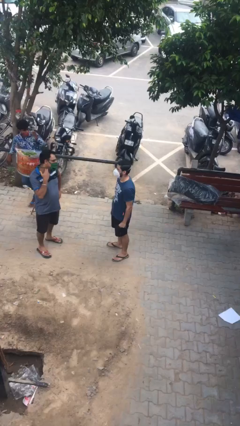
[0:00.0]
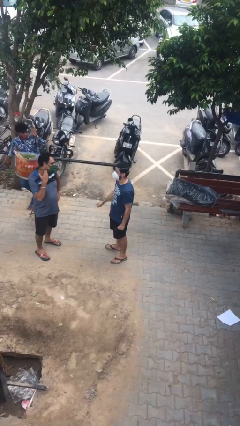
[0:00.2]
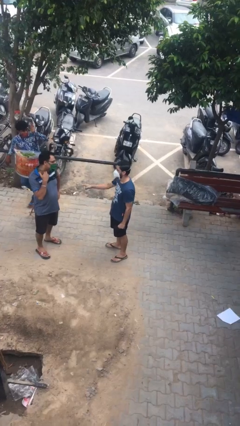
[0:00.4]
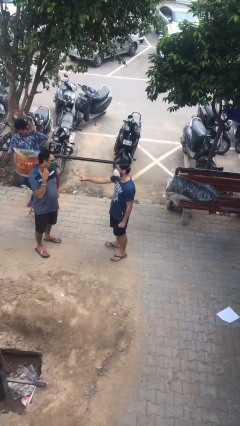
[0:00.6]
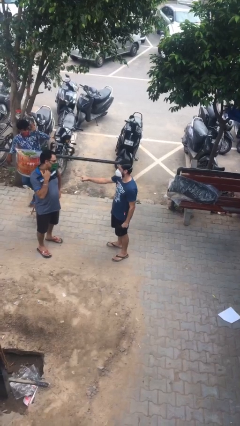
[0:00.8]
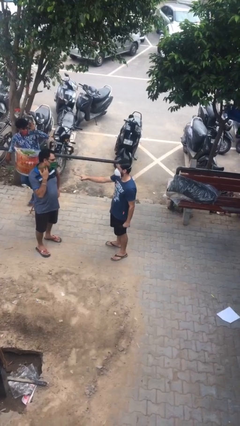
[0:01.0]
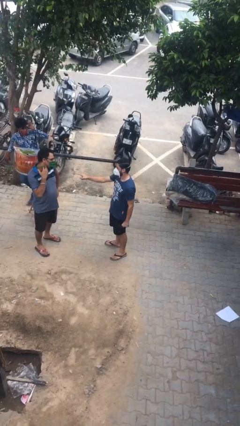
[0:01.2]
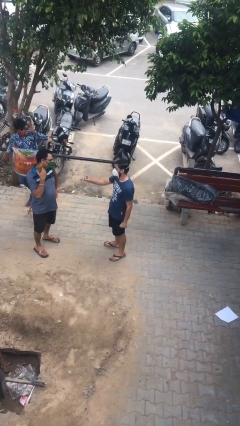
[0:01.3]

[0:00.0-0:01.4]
person points at person

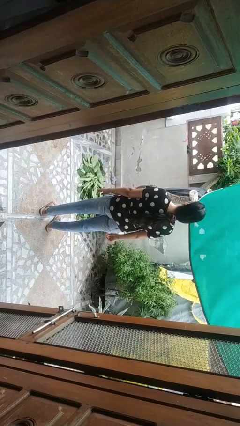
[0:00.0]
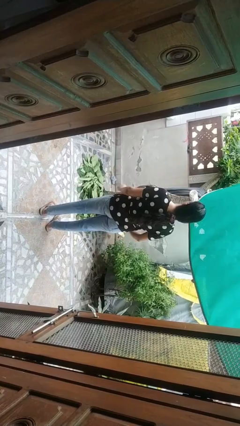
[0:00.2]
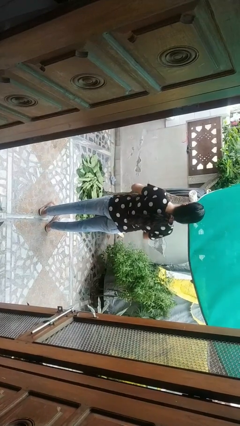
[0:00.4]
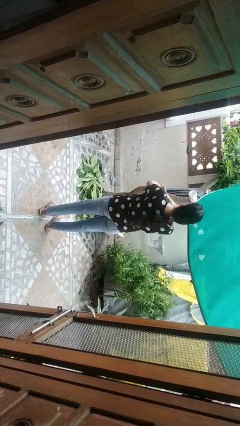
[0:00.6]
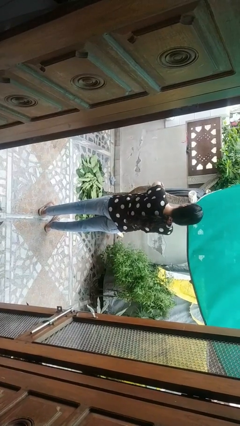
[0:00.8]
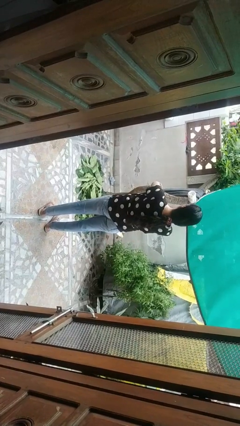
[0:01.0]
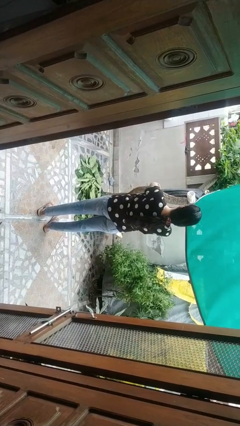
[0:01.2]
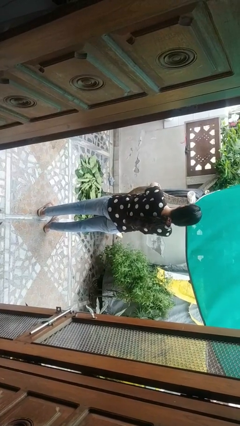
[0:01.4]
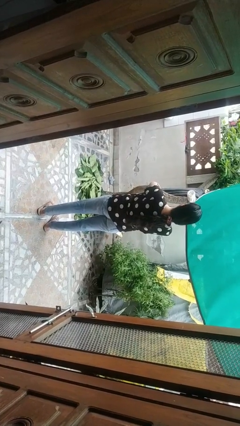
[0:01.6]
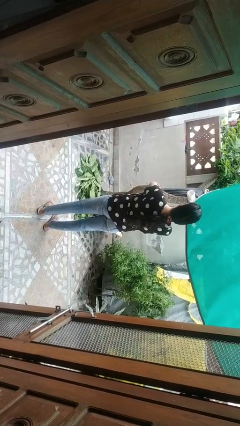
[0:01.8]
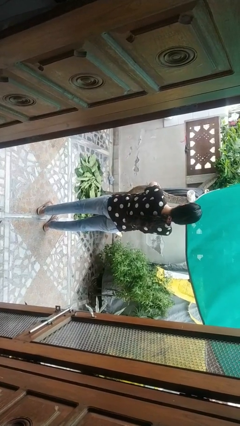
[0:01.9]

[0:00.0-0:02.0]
person crosses arms

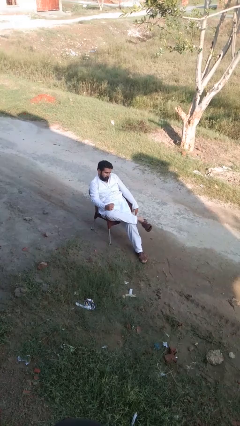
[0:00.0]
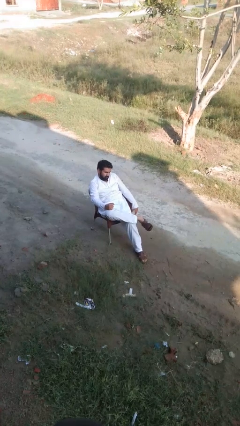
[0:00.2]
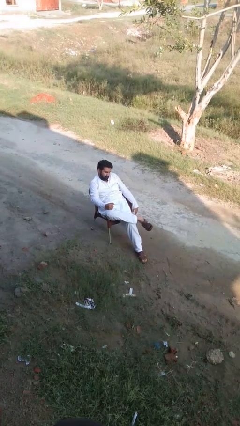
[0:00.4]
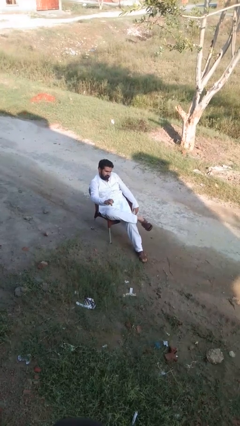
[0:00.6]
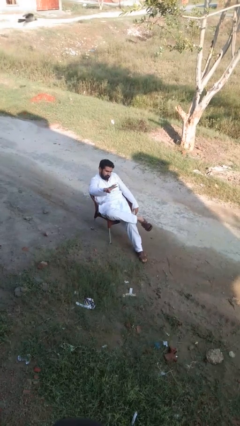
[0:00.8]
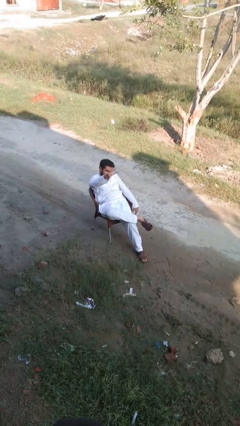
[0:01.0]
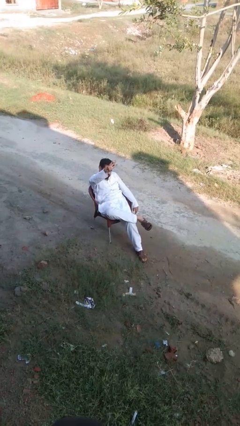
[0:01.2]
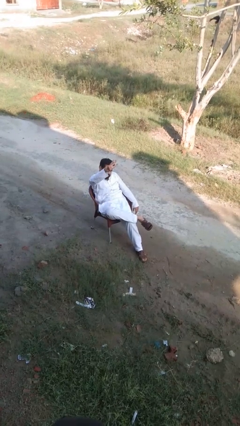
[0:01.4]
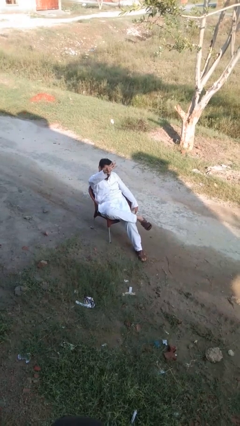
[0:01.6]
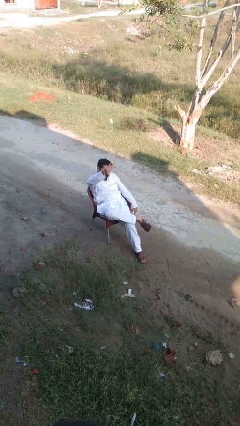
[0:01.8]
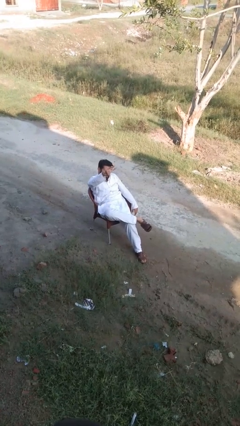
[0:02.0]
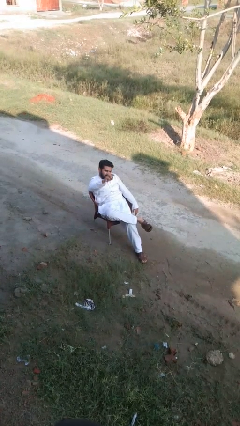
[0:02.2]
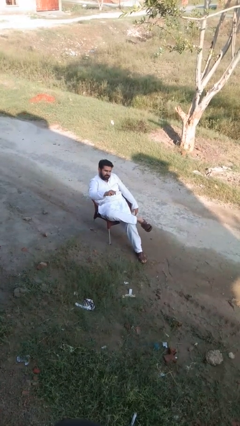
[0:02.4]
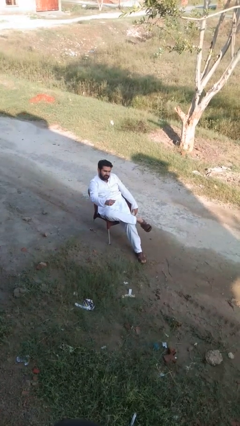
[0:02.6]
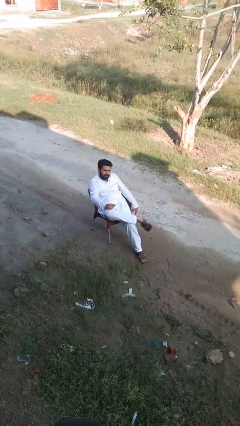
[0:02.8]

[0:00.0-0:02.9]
person gestures number three

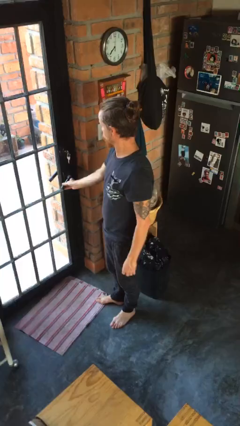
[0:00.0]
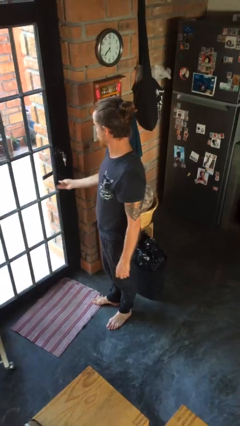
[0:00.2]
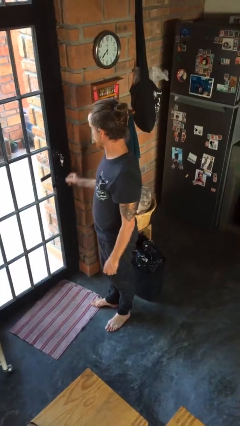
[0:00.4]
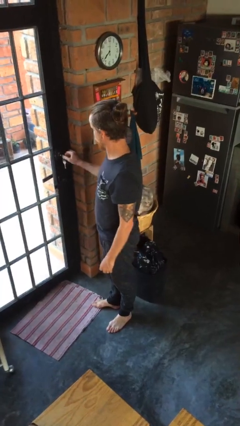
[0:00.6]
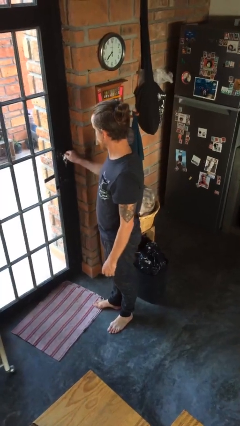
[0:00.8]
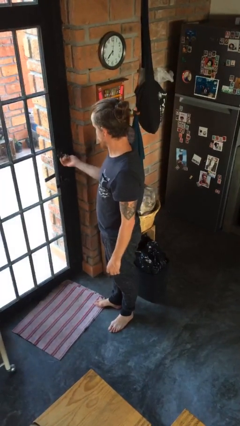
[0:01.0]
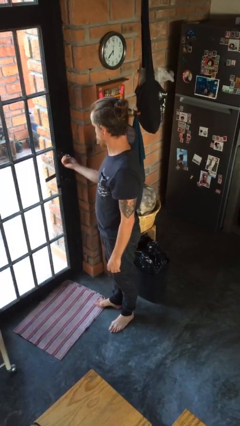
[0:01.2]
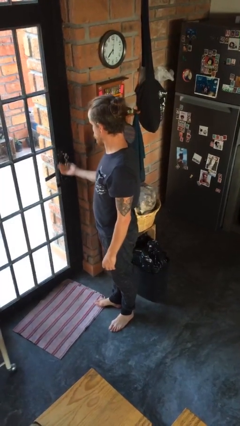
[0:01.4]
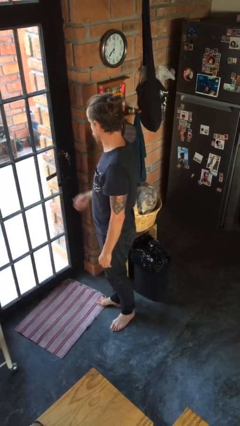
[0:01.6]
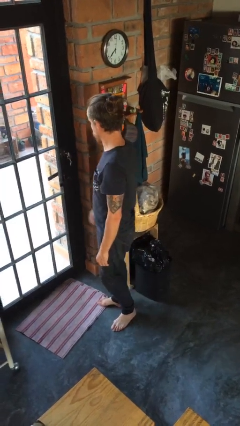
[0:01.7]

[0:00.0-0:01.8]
person locks door with keys

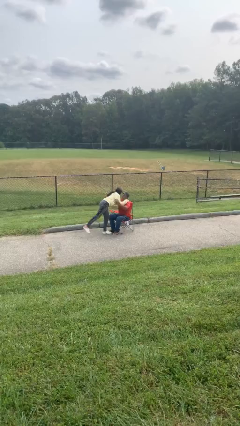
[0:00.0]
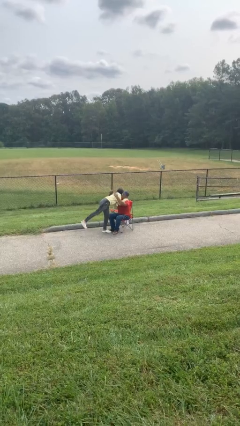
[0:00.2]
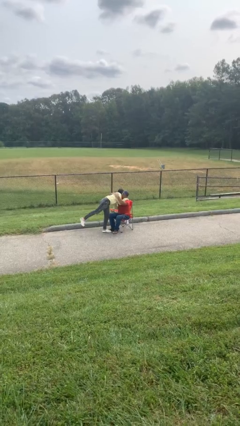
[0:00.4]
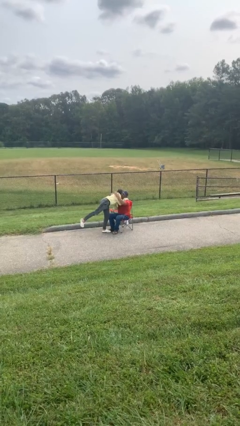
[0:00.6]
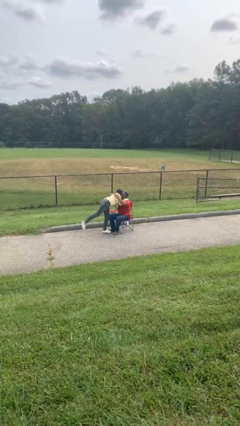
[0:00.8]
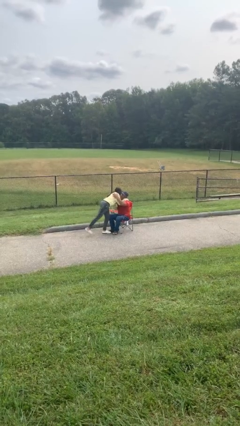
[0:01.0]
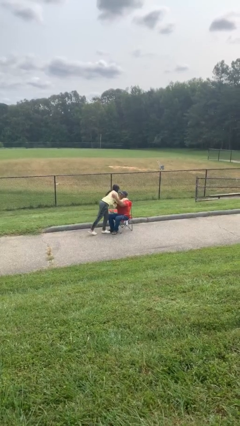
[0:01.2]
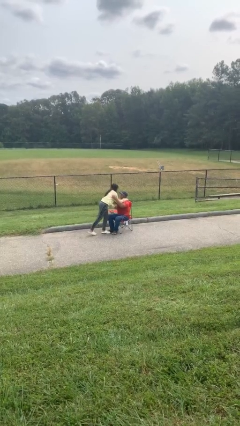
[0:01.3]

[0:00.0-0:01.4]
person embraces person

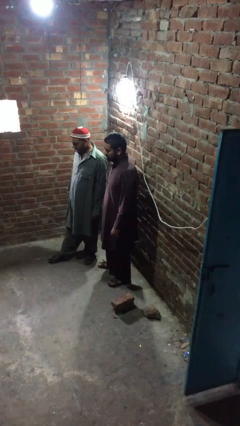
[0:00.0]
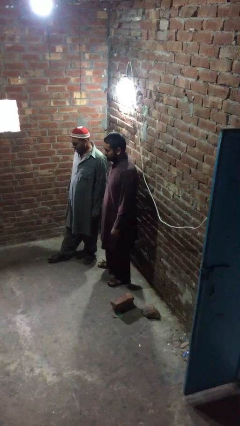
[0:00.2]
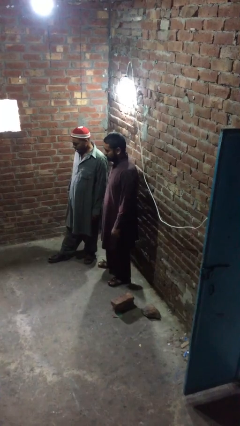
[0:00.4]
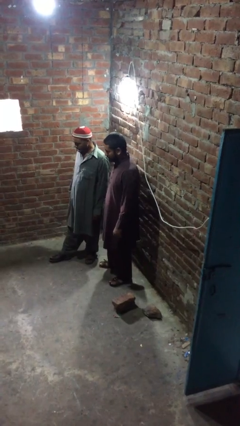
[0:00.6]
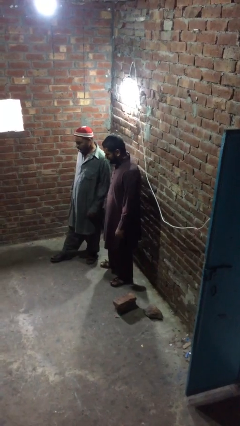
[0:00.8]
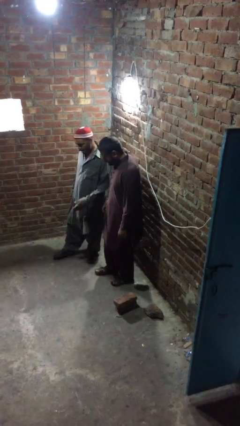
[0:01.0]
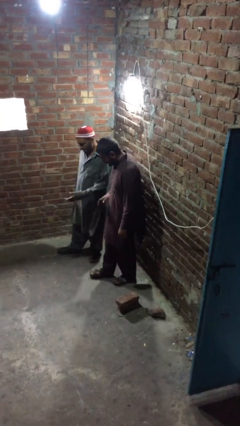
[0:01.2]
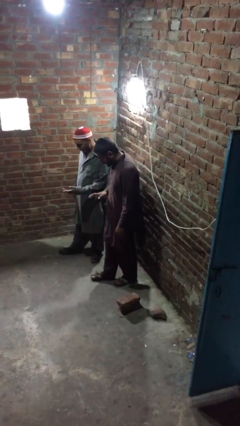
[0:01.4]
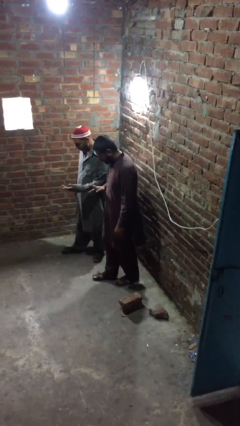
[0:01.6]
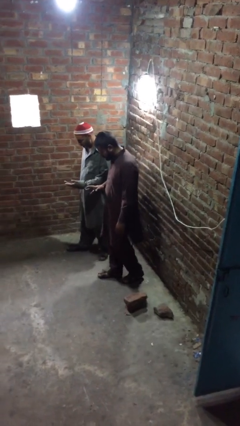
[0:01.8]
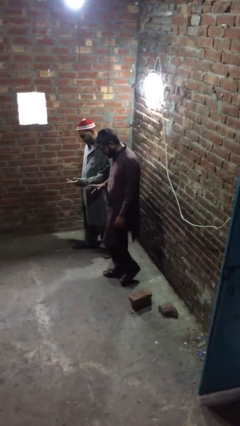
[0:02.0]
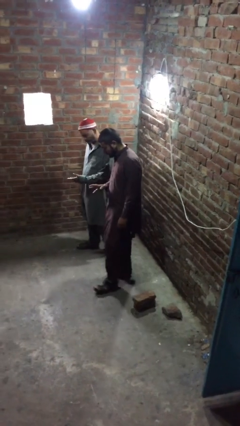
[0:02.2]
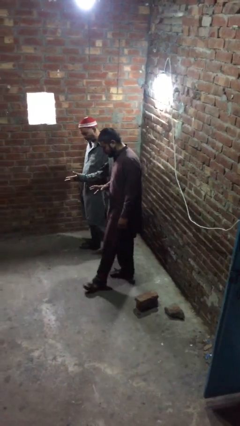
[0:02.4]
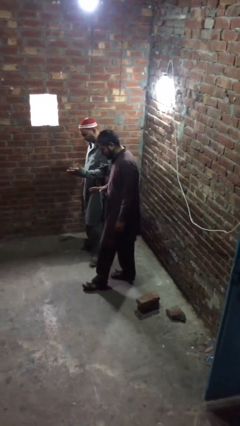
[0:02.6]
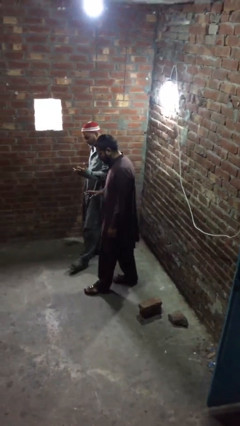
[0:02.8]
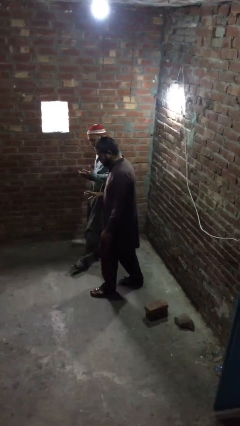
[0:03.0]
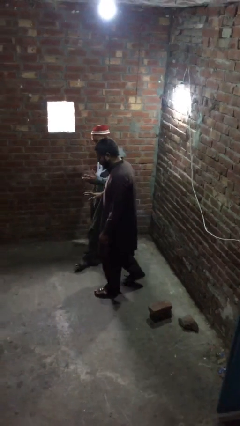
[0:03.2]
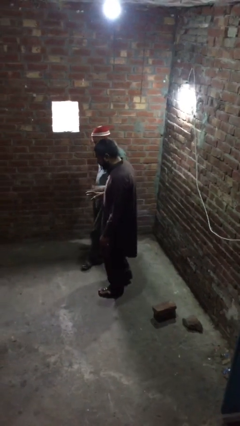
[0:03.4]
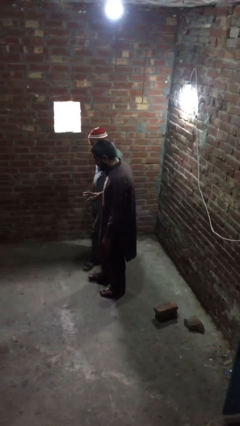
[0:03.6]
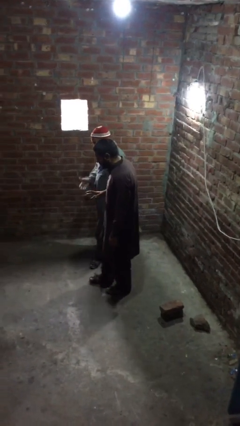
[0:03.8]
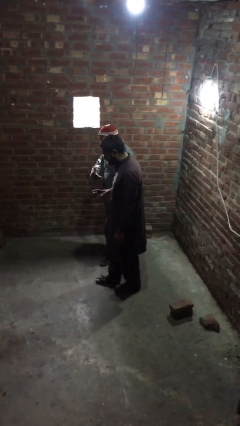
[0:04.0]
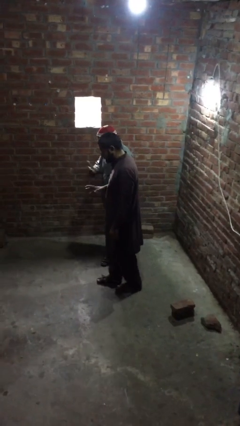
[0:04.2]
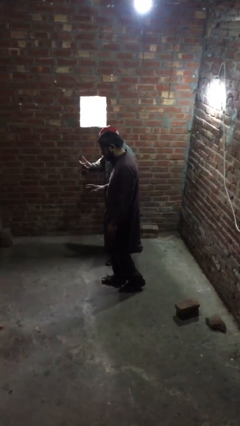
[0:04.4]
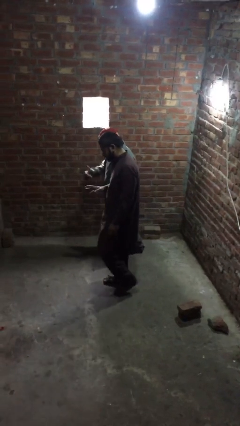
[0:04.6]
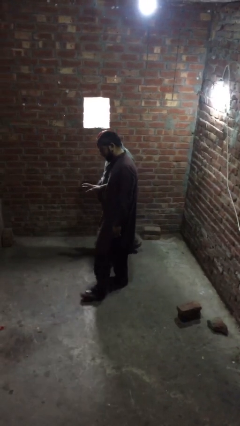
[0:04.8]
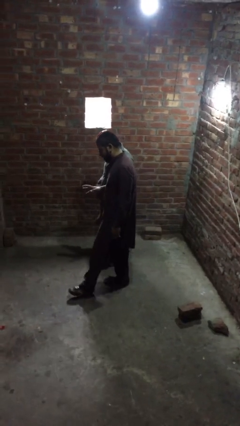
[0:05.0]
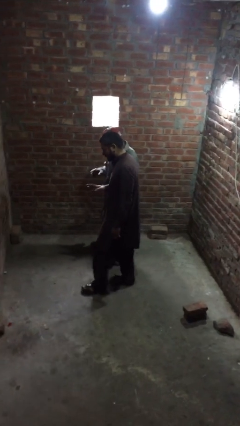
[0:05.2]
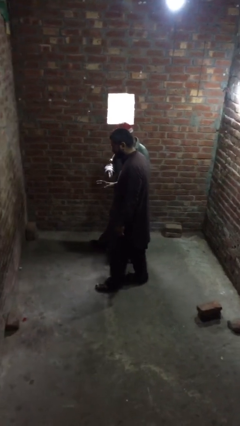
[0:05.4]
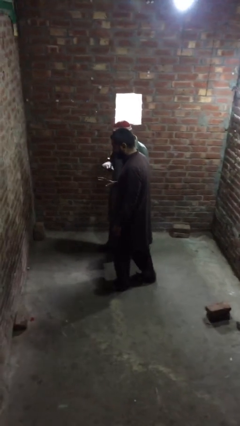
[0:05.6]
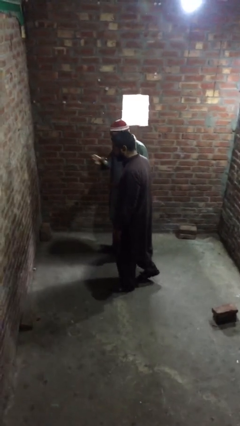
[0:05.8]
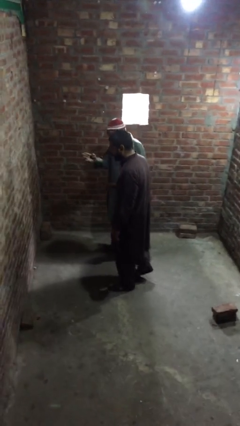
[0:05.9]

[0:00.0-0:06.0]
person talks to person

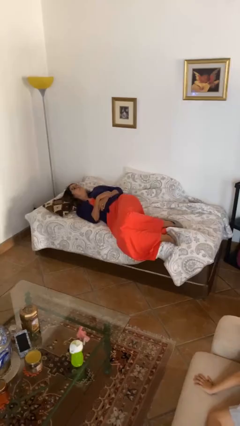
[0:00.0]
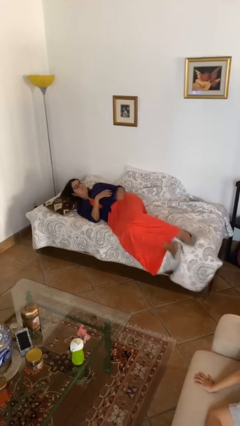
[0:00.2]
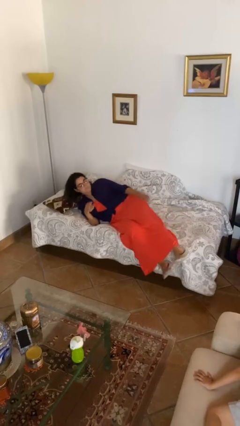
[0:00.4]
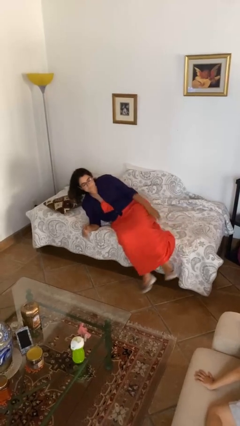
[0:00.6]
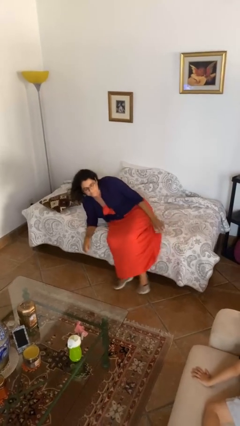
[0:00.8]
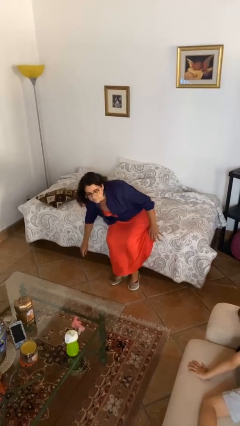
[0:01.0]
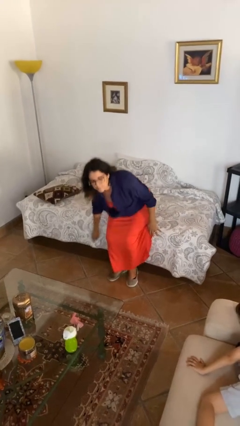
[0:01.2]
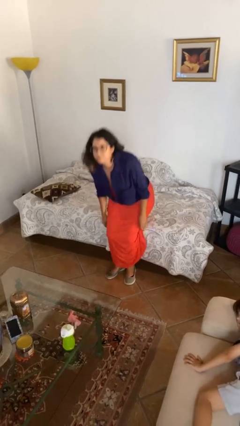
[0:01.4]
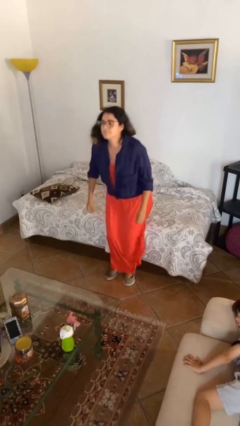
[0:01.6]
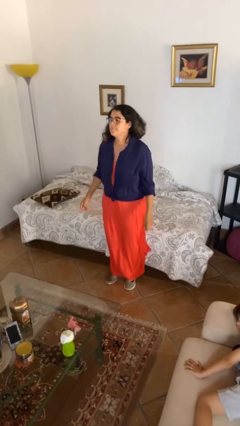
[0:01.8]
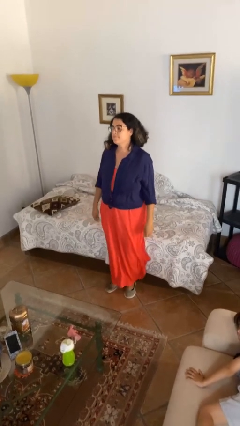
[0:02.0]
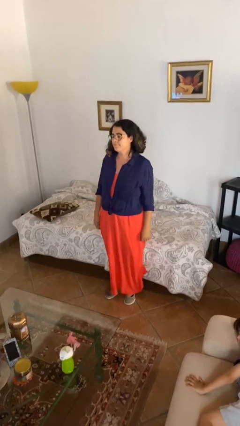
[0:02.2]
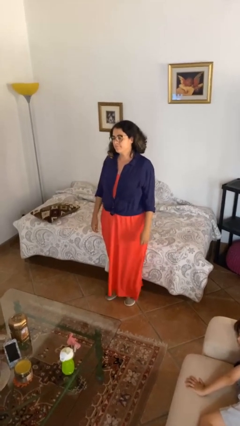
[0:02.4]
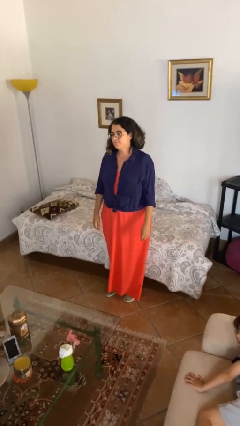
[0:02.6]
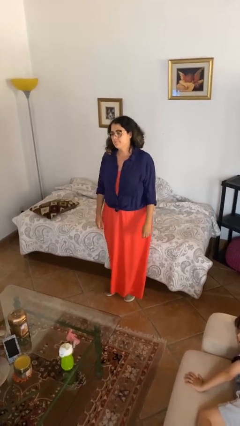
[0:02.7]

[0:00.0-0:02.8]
person stands up
